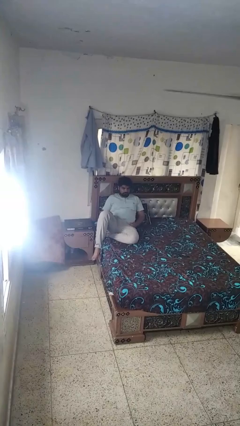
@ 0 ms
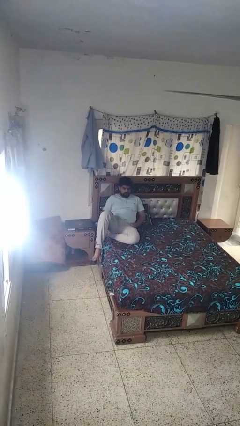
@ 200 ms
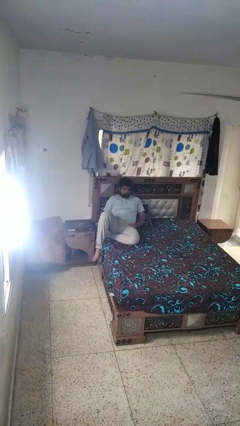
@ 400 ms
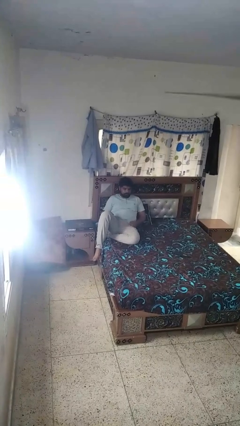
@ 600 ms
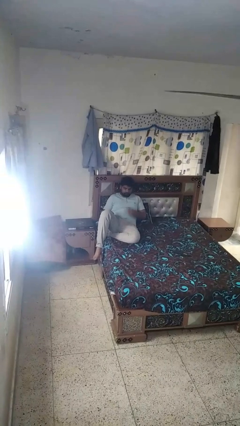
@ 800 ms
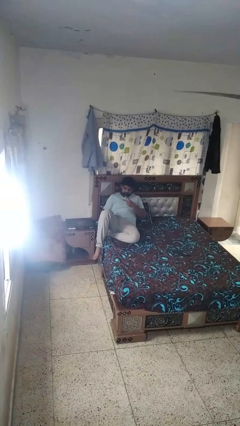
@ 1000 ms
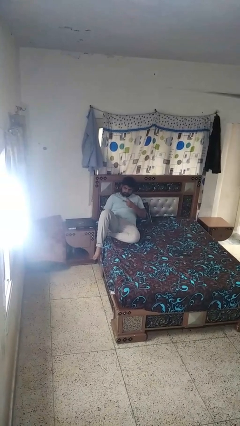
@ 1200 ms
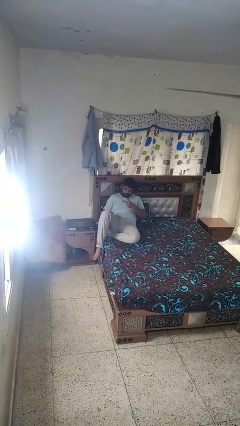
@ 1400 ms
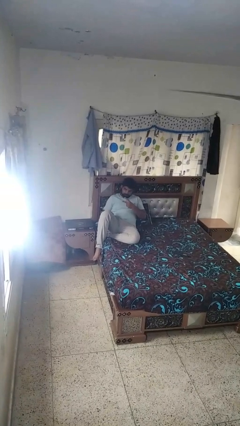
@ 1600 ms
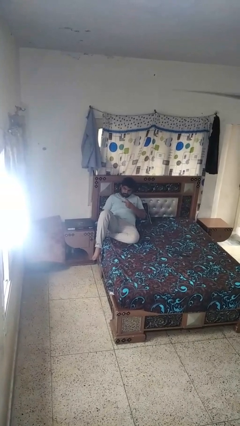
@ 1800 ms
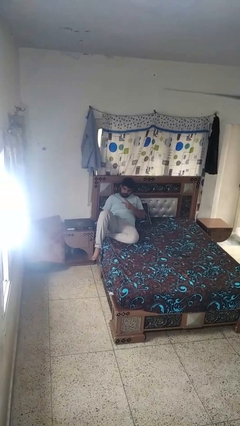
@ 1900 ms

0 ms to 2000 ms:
person gestures peace

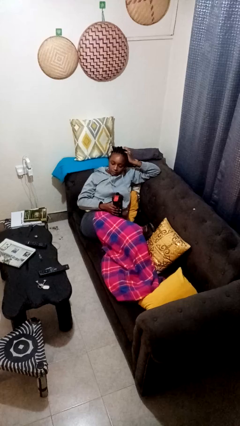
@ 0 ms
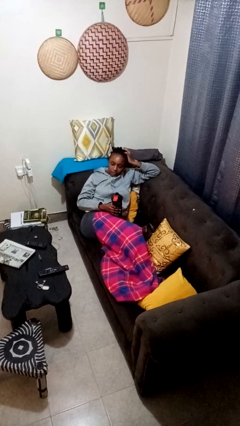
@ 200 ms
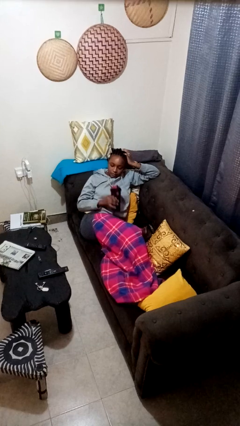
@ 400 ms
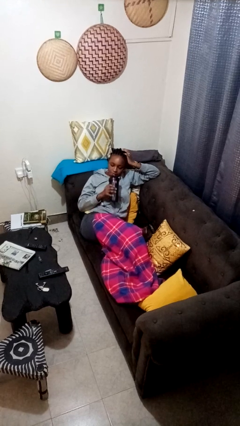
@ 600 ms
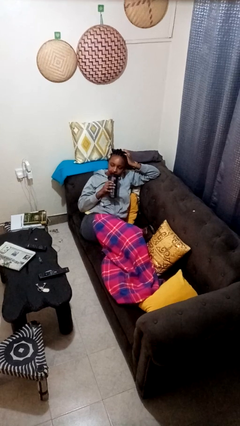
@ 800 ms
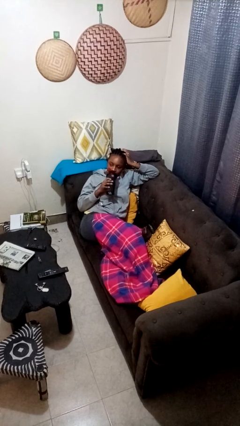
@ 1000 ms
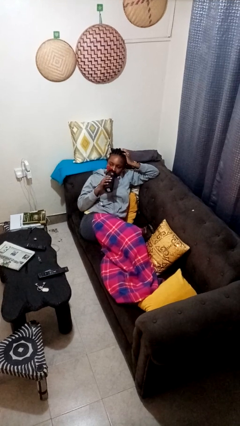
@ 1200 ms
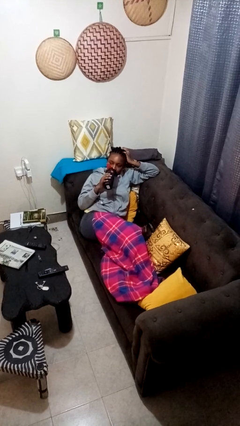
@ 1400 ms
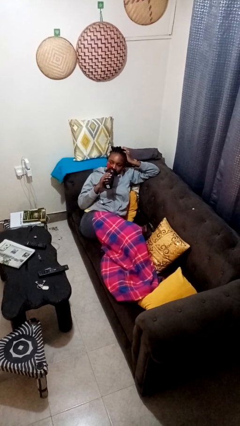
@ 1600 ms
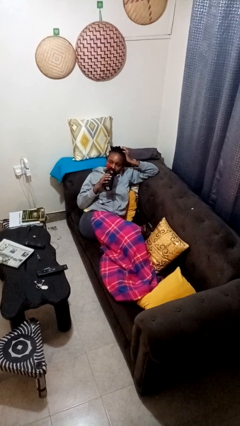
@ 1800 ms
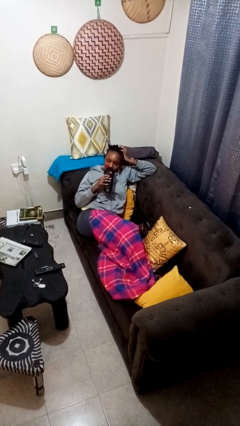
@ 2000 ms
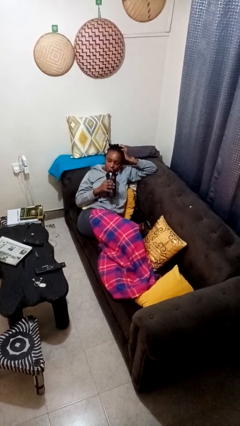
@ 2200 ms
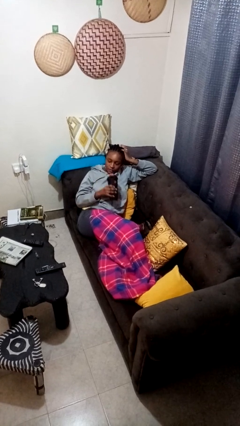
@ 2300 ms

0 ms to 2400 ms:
person drinks from bottle

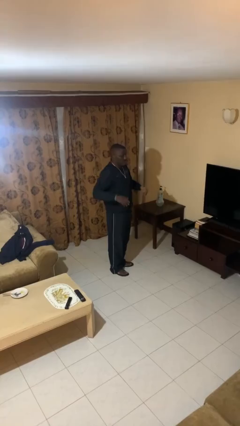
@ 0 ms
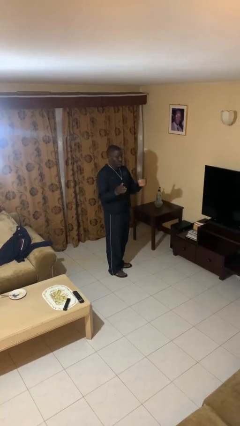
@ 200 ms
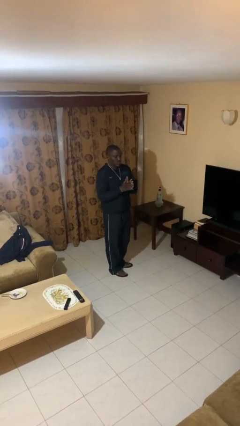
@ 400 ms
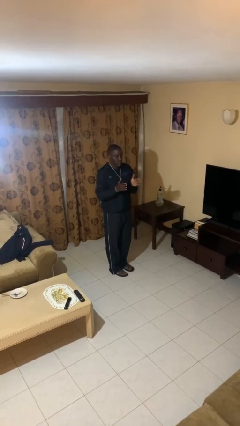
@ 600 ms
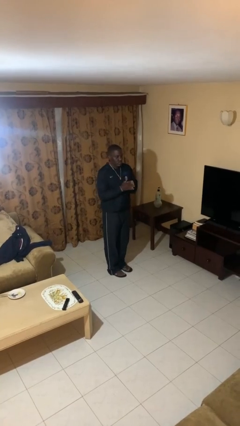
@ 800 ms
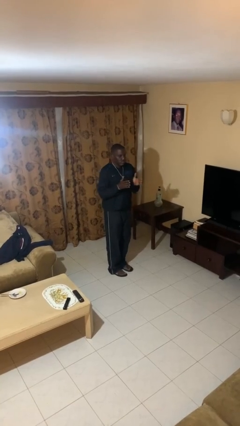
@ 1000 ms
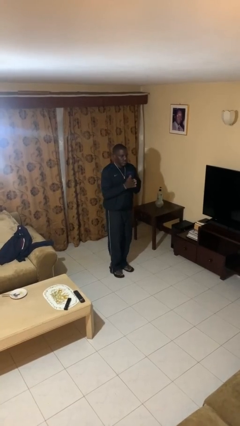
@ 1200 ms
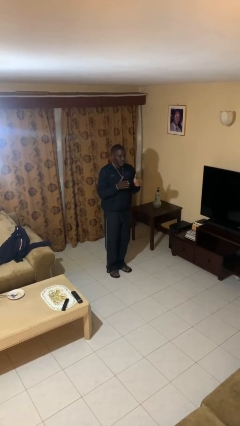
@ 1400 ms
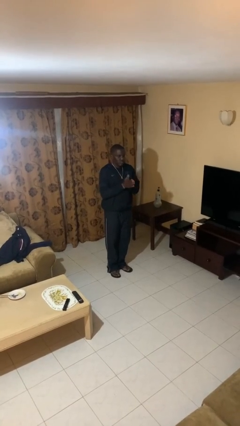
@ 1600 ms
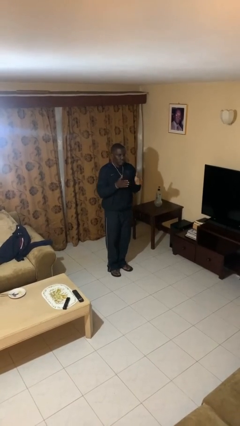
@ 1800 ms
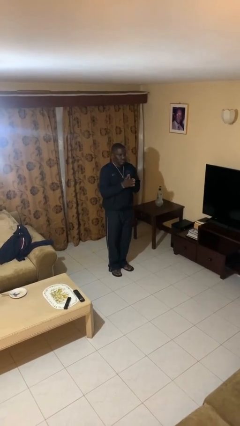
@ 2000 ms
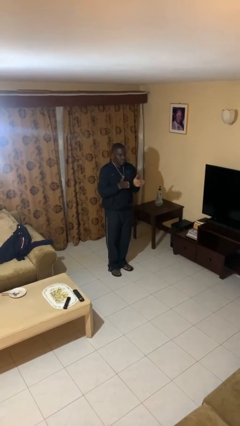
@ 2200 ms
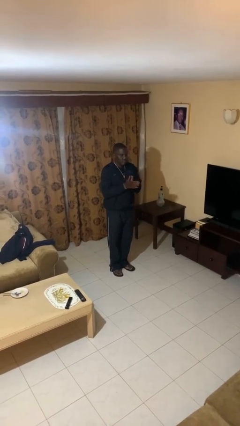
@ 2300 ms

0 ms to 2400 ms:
person claps hands

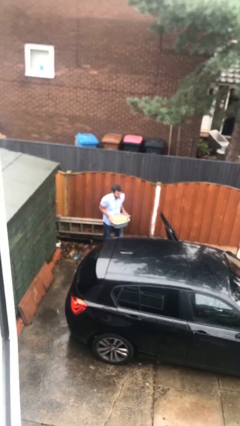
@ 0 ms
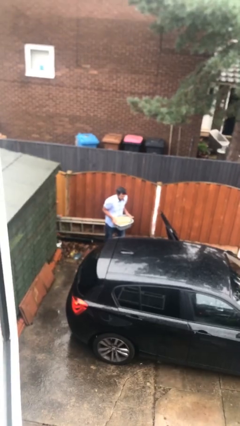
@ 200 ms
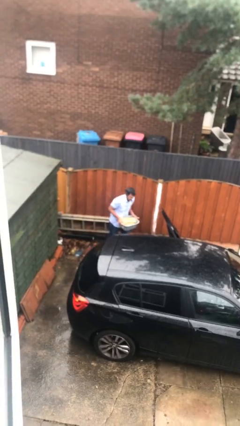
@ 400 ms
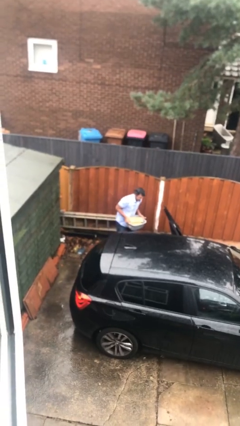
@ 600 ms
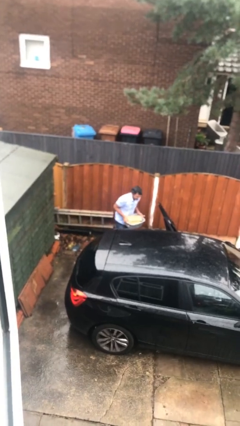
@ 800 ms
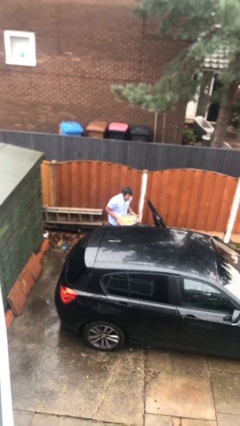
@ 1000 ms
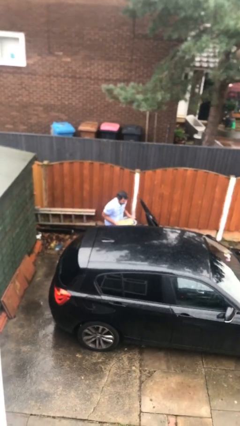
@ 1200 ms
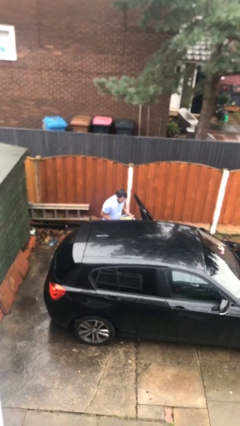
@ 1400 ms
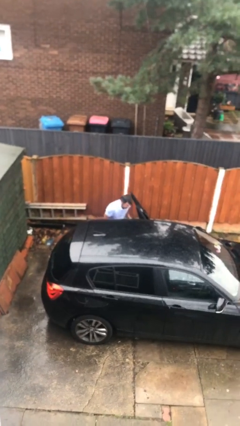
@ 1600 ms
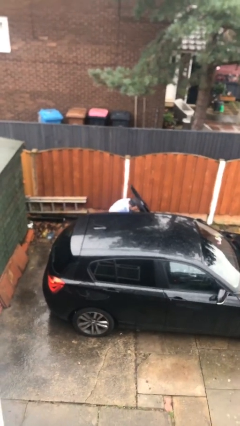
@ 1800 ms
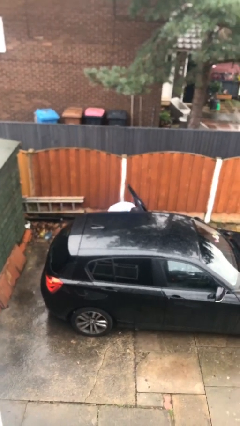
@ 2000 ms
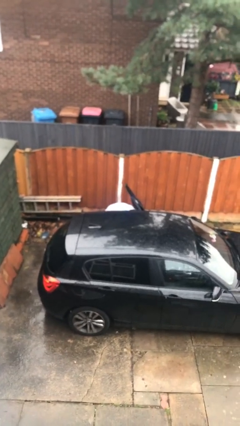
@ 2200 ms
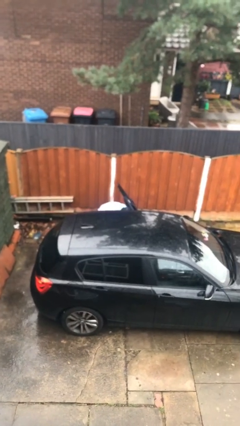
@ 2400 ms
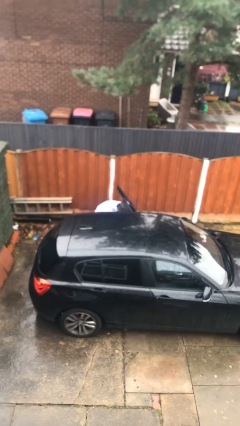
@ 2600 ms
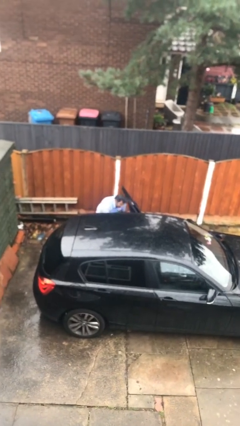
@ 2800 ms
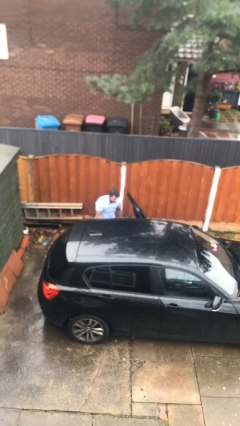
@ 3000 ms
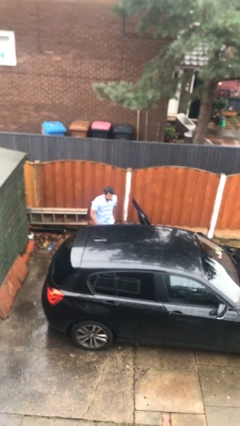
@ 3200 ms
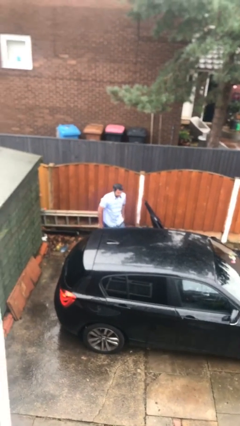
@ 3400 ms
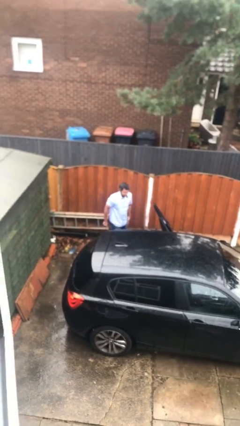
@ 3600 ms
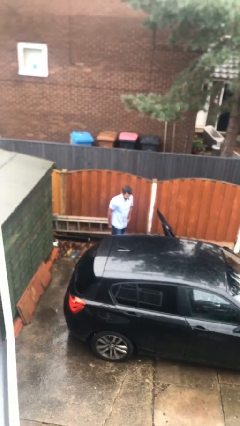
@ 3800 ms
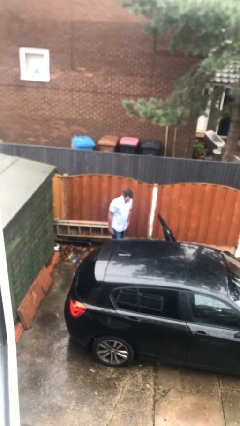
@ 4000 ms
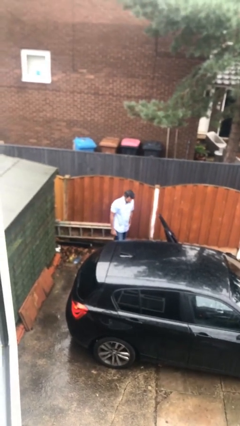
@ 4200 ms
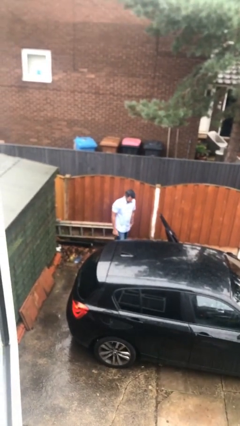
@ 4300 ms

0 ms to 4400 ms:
person loads car

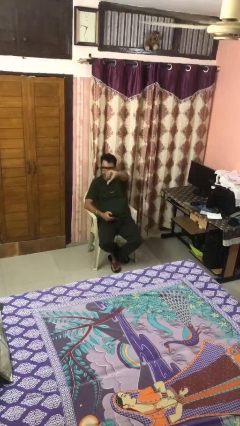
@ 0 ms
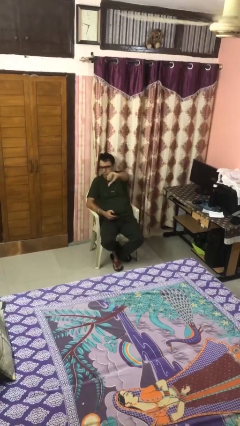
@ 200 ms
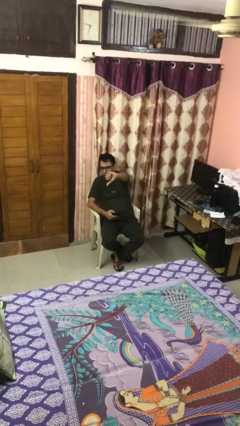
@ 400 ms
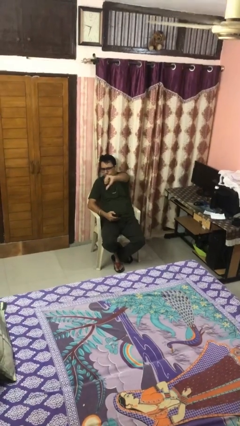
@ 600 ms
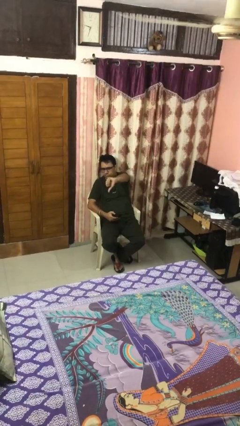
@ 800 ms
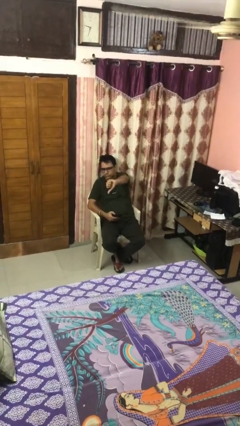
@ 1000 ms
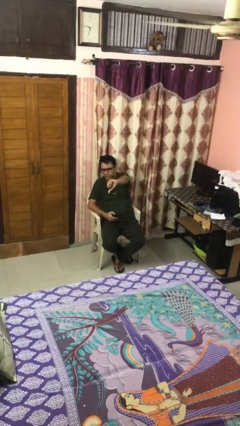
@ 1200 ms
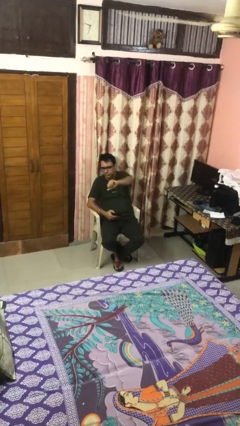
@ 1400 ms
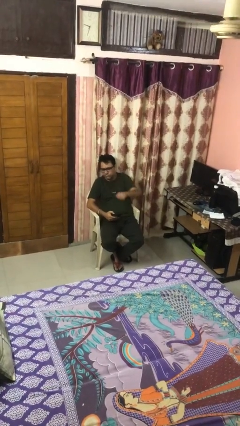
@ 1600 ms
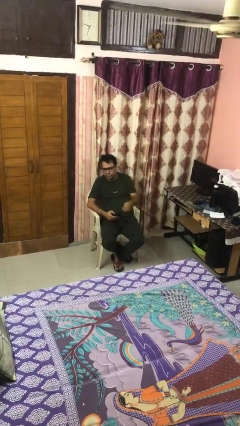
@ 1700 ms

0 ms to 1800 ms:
person gestures thumbs down

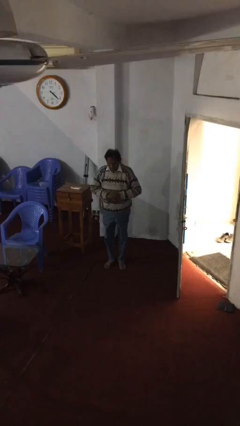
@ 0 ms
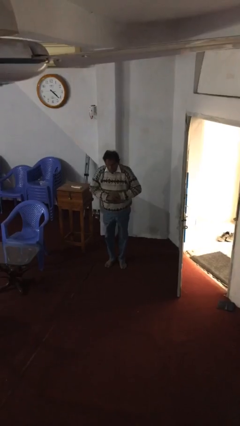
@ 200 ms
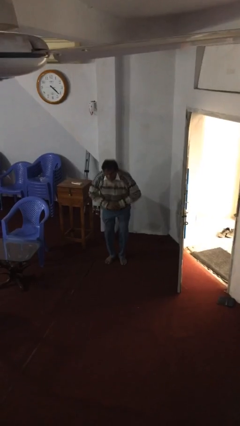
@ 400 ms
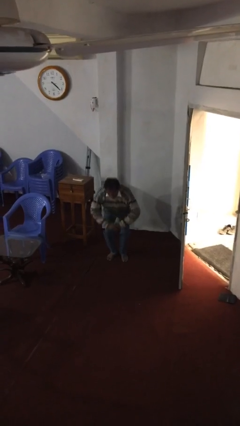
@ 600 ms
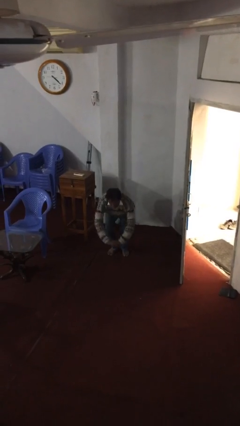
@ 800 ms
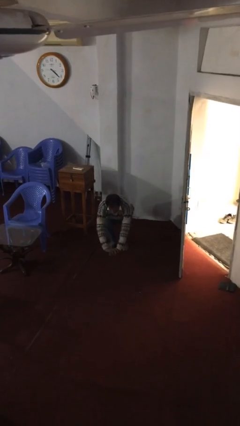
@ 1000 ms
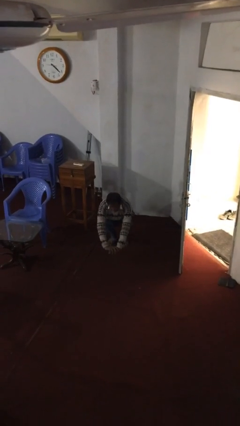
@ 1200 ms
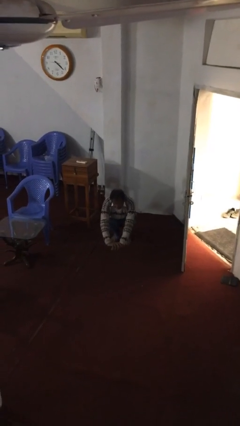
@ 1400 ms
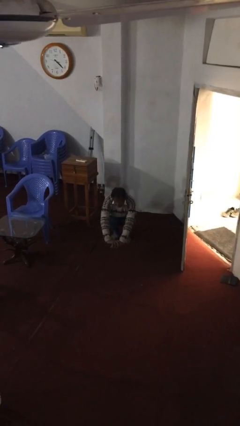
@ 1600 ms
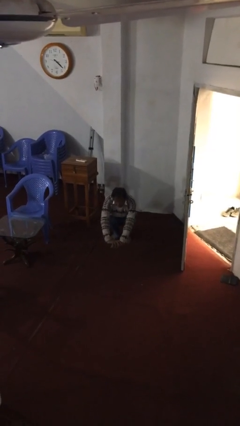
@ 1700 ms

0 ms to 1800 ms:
person sits down

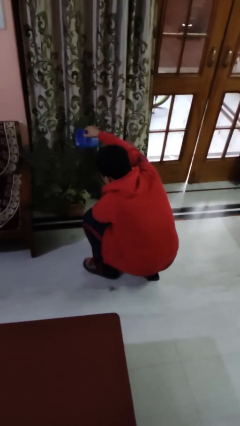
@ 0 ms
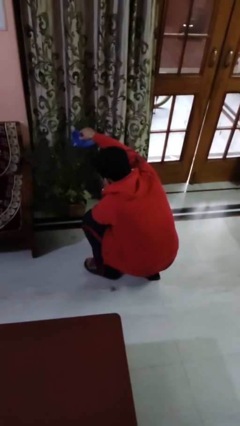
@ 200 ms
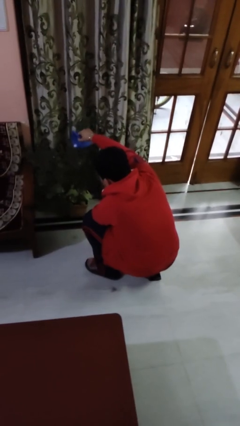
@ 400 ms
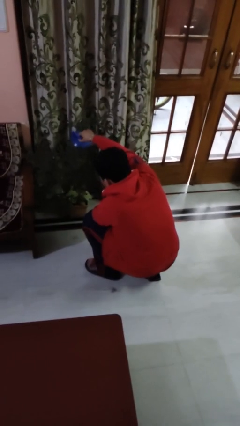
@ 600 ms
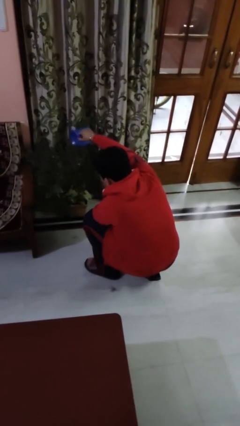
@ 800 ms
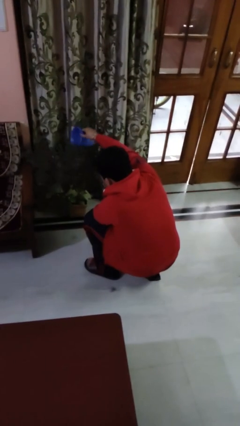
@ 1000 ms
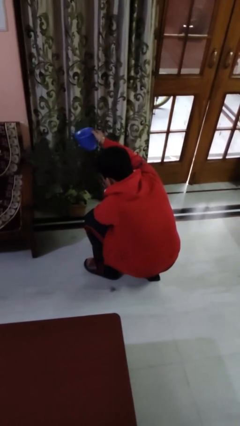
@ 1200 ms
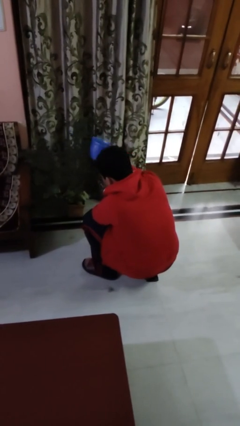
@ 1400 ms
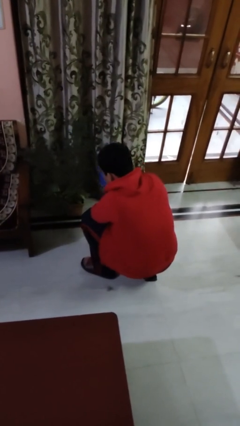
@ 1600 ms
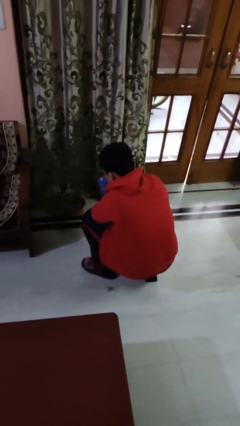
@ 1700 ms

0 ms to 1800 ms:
person waters houseplant

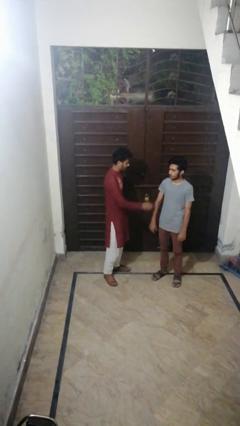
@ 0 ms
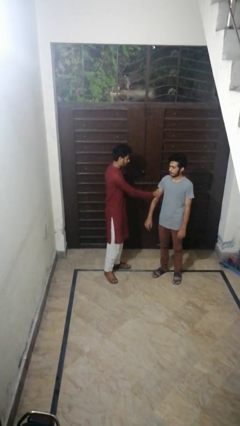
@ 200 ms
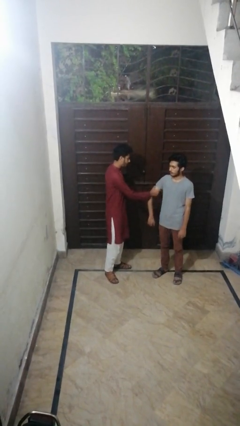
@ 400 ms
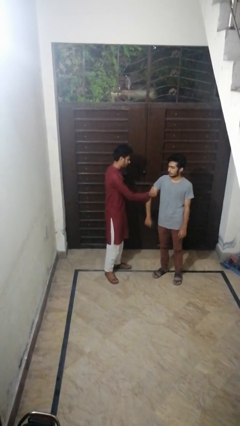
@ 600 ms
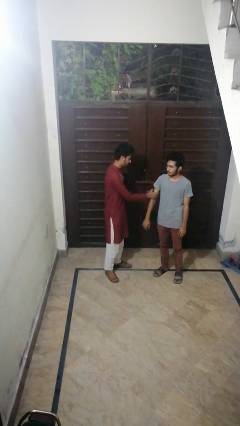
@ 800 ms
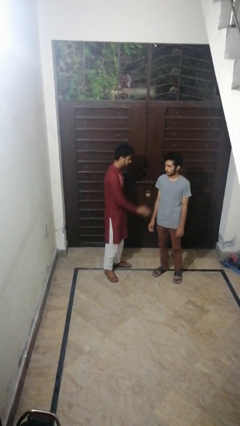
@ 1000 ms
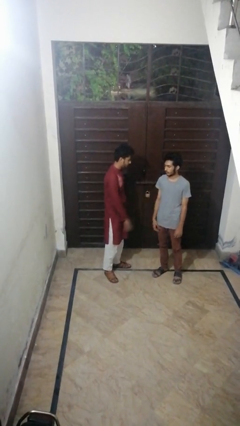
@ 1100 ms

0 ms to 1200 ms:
person grabs person by bicep
